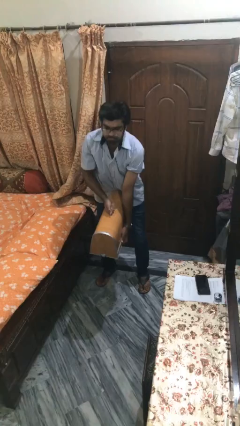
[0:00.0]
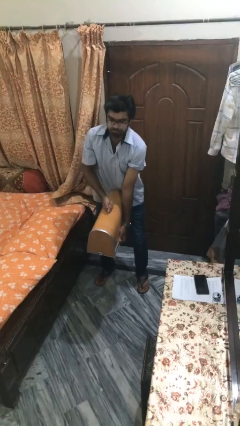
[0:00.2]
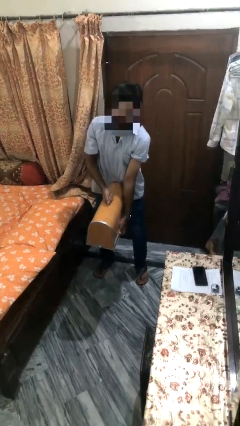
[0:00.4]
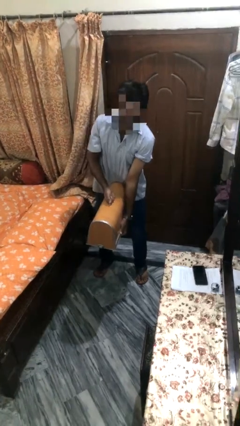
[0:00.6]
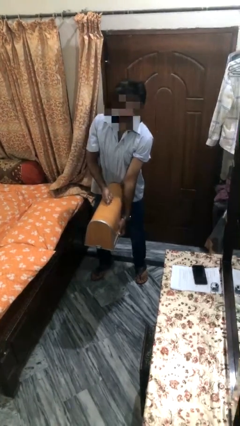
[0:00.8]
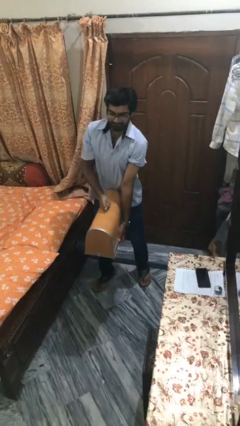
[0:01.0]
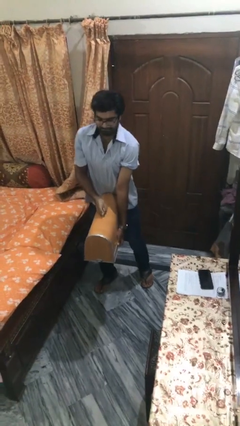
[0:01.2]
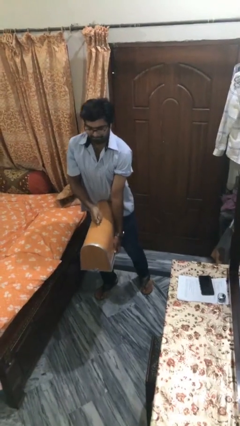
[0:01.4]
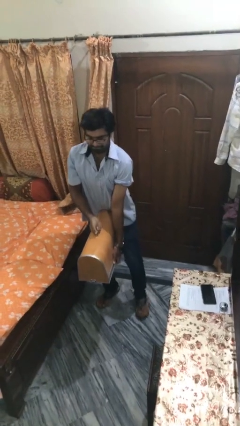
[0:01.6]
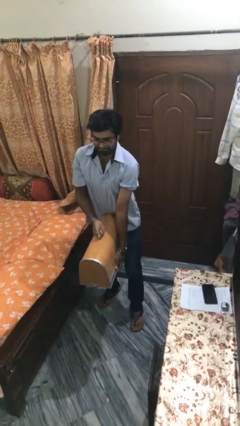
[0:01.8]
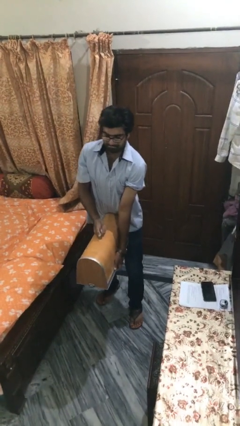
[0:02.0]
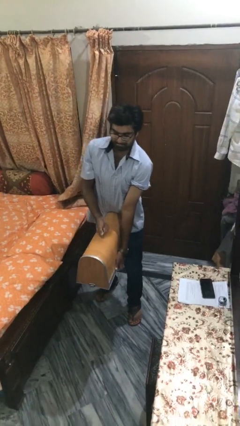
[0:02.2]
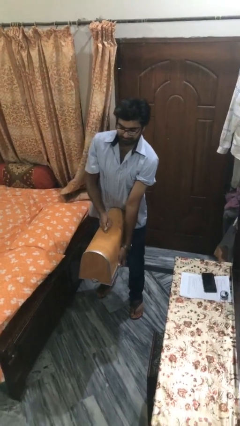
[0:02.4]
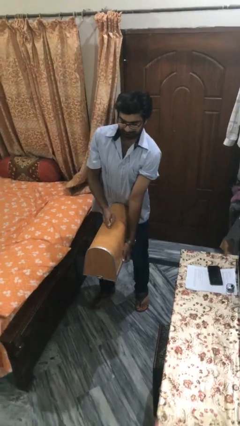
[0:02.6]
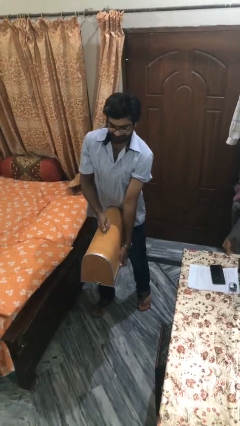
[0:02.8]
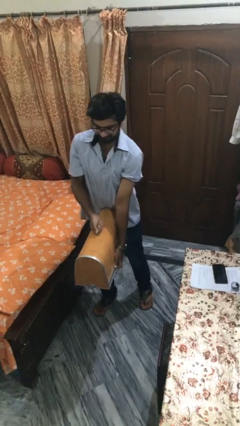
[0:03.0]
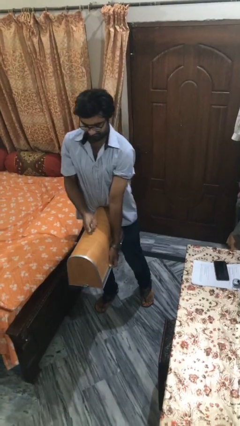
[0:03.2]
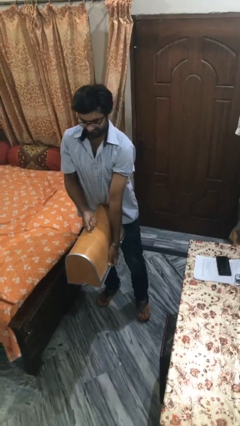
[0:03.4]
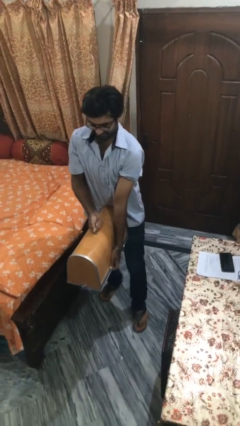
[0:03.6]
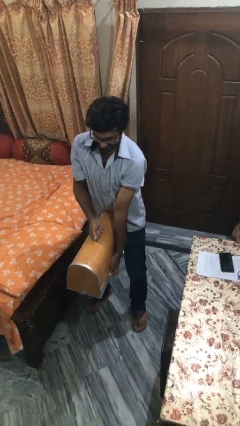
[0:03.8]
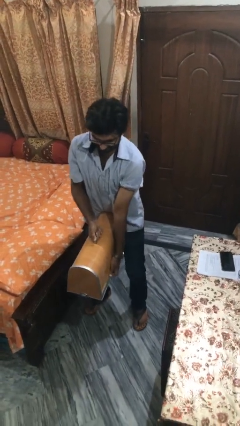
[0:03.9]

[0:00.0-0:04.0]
person carries heavy object

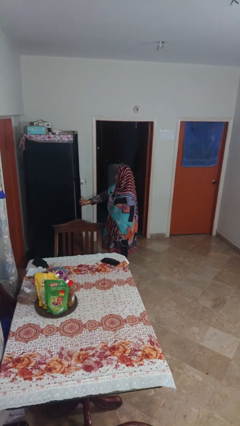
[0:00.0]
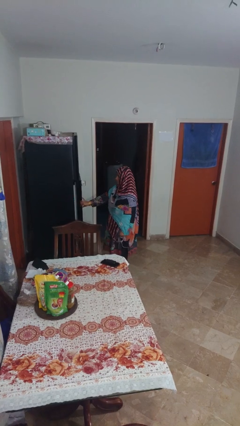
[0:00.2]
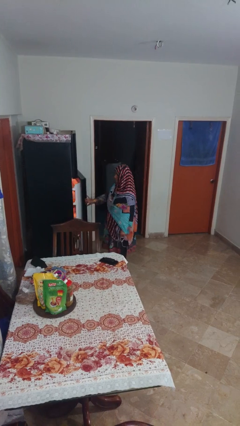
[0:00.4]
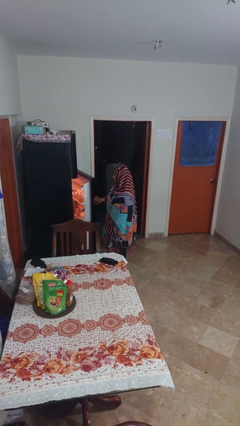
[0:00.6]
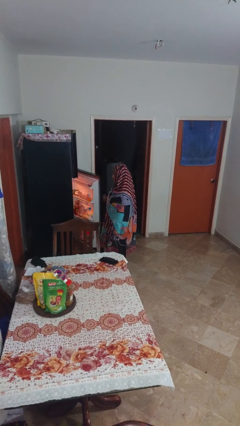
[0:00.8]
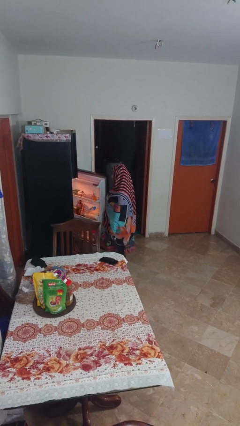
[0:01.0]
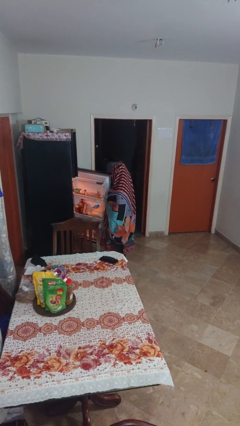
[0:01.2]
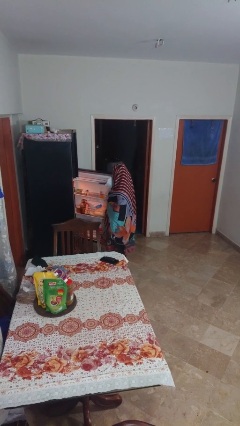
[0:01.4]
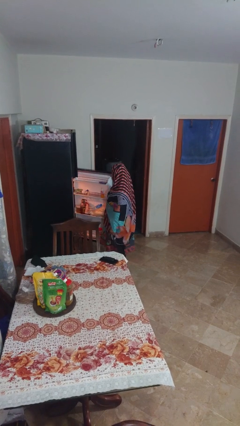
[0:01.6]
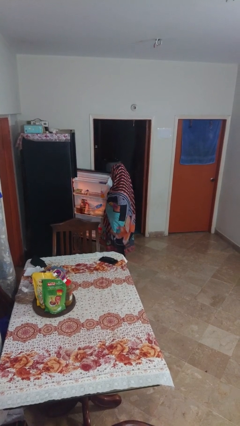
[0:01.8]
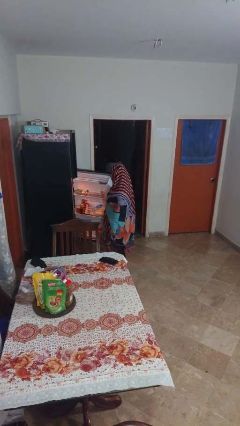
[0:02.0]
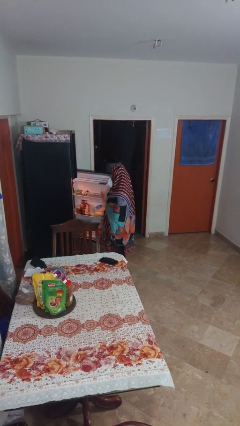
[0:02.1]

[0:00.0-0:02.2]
person opens refrigerator

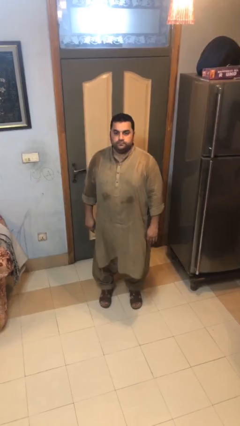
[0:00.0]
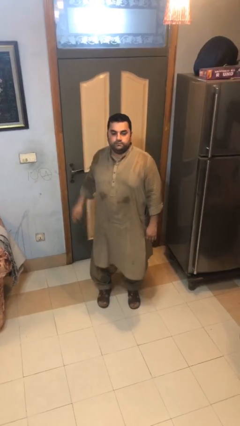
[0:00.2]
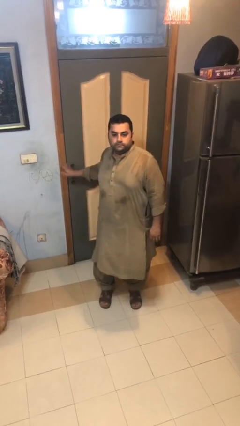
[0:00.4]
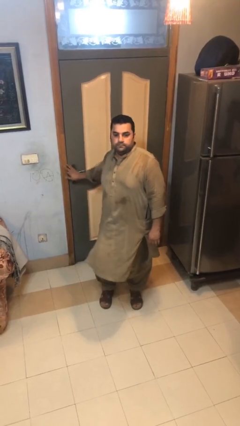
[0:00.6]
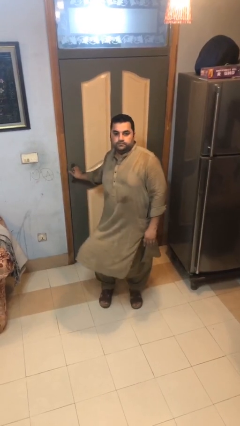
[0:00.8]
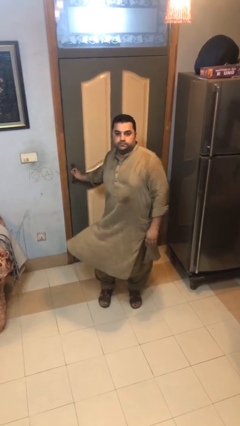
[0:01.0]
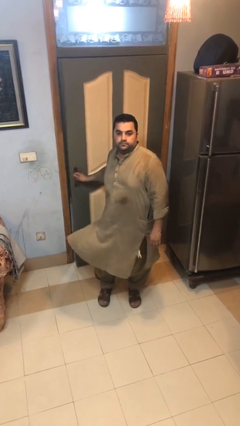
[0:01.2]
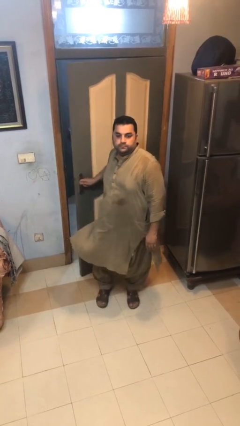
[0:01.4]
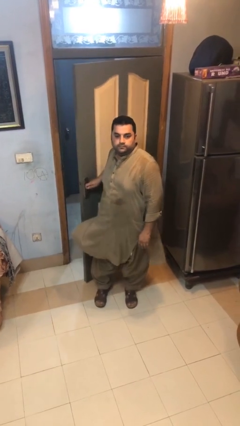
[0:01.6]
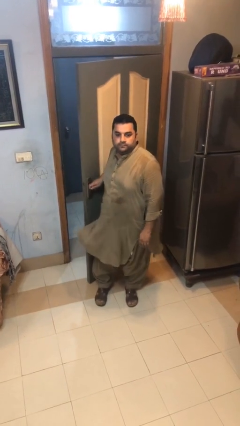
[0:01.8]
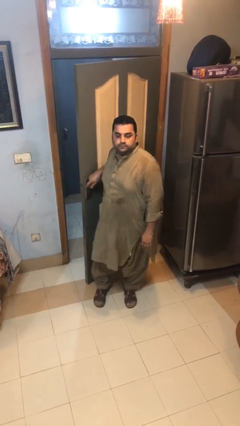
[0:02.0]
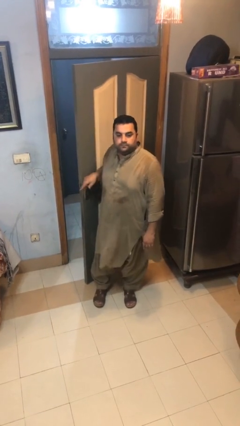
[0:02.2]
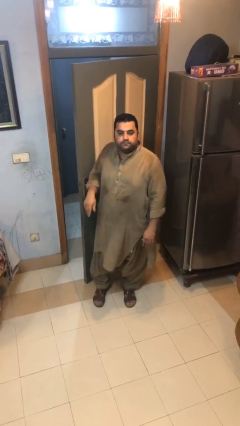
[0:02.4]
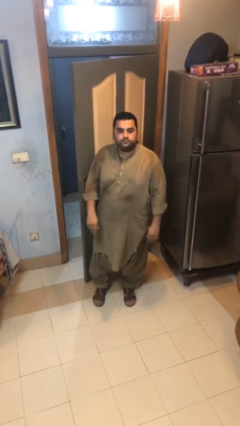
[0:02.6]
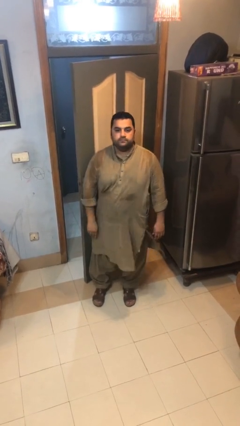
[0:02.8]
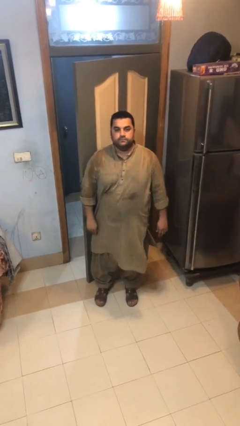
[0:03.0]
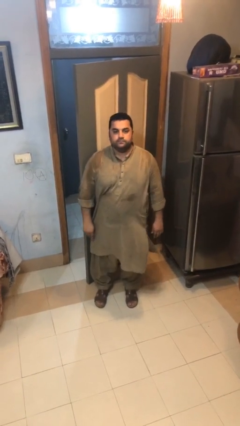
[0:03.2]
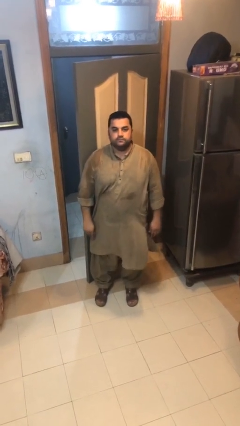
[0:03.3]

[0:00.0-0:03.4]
person opens facility door

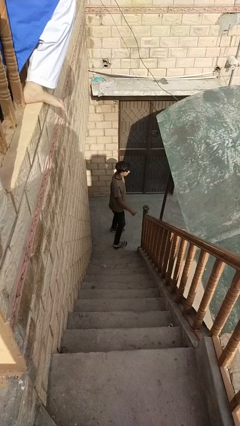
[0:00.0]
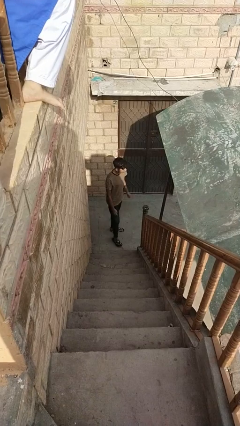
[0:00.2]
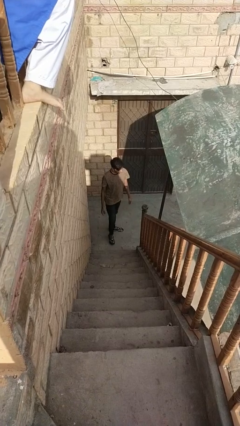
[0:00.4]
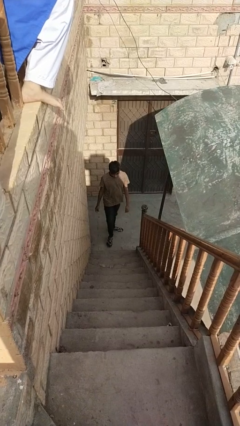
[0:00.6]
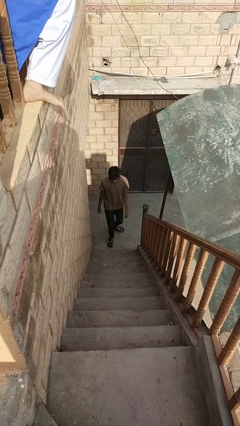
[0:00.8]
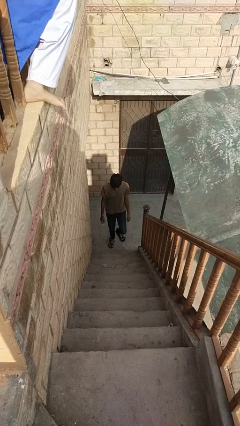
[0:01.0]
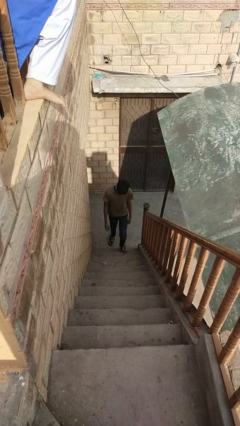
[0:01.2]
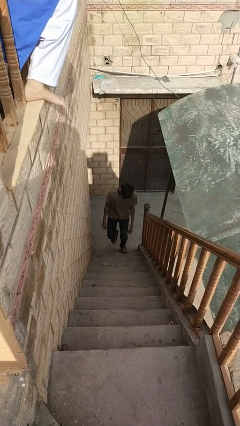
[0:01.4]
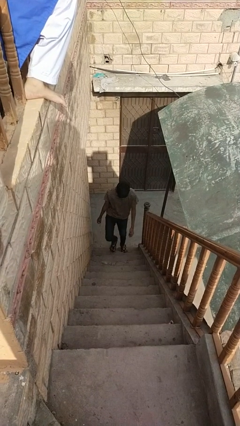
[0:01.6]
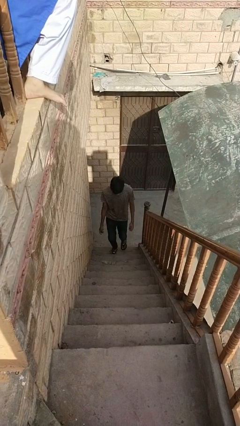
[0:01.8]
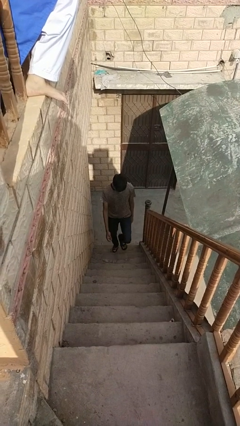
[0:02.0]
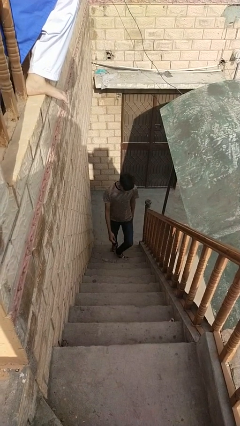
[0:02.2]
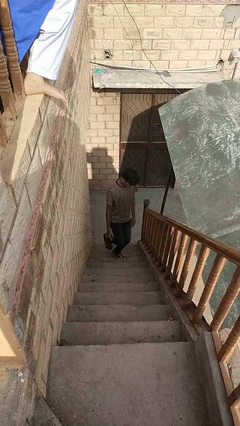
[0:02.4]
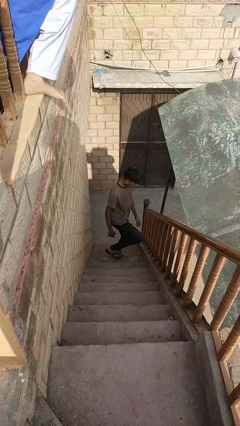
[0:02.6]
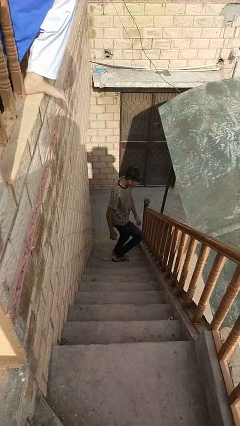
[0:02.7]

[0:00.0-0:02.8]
person climbs up stairs

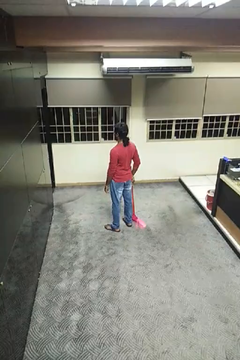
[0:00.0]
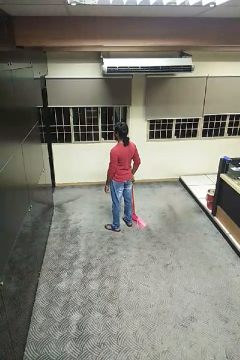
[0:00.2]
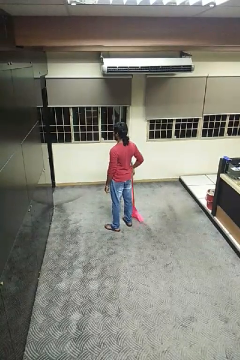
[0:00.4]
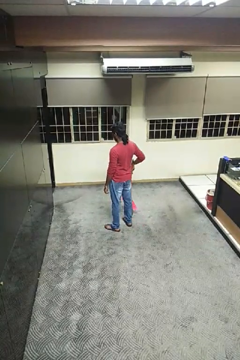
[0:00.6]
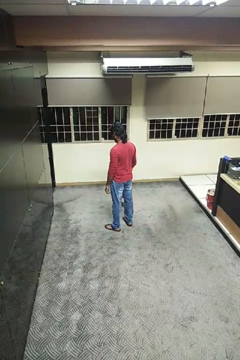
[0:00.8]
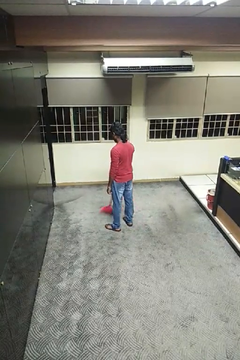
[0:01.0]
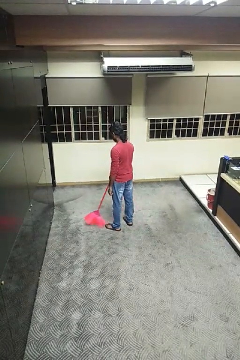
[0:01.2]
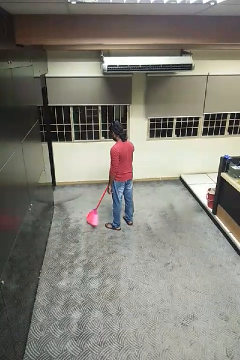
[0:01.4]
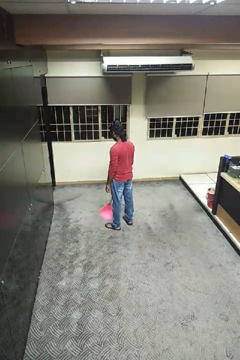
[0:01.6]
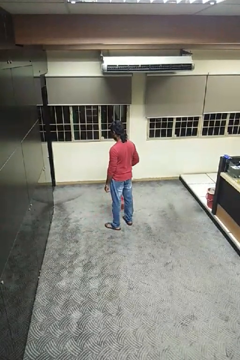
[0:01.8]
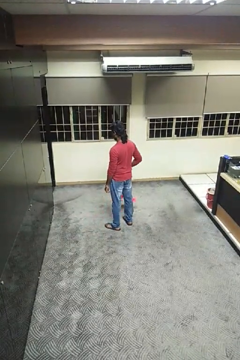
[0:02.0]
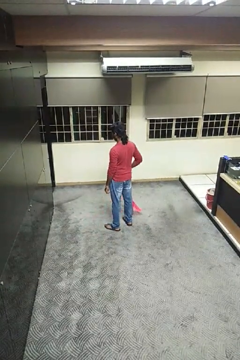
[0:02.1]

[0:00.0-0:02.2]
person sweeps floor

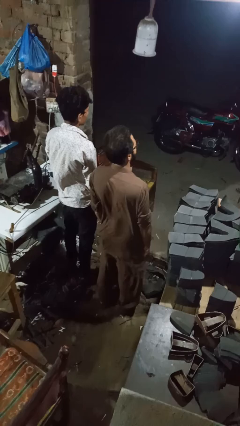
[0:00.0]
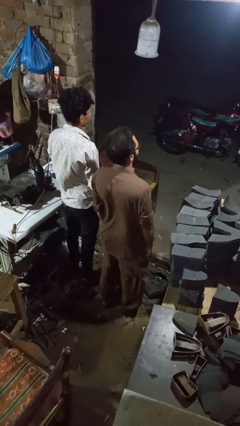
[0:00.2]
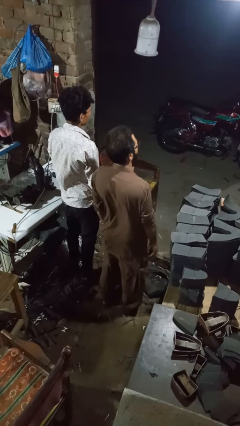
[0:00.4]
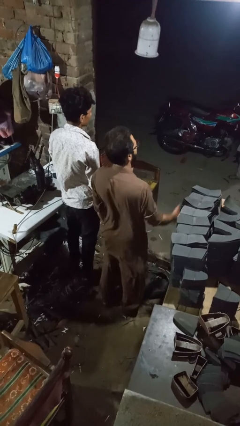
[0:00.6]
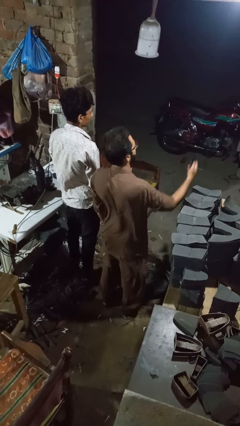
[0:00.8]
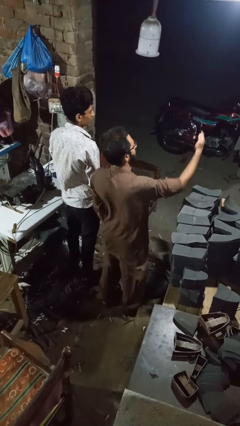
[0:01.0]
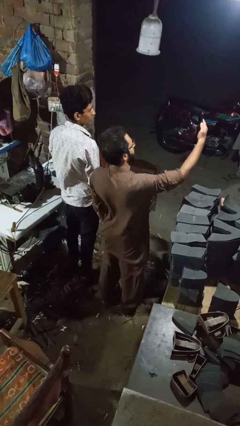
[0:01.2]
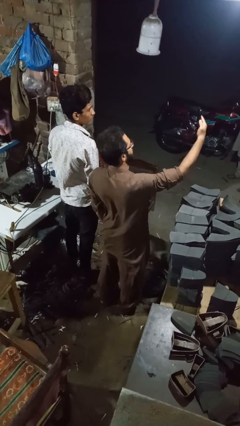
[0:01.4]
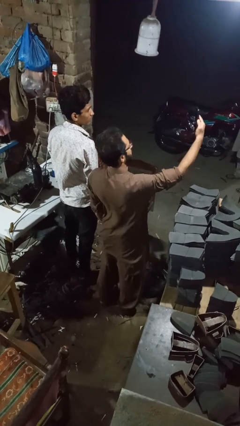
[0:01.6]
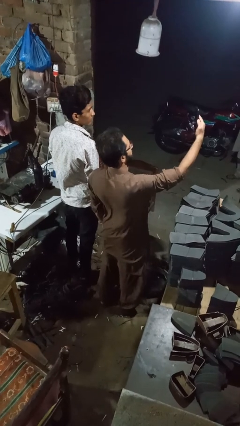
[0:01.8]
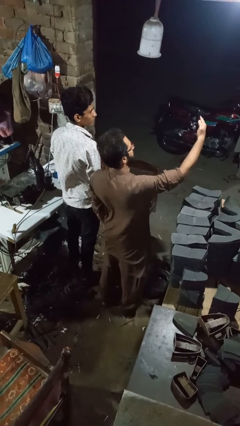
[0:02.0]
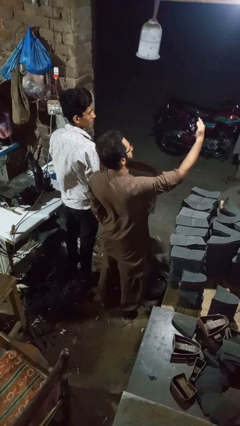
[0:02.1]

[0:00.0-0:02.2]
person takes selfie with person

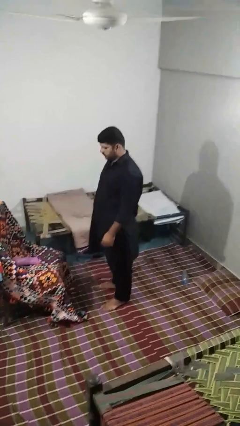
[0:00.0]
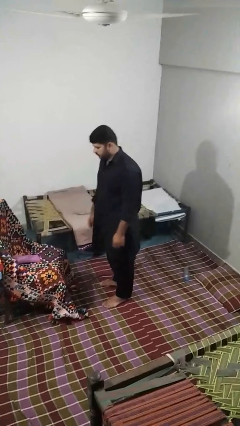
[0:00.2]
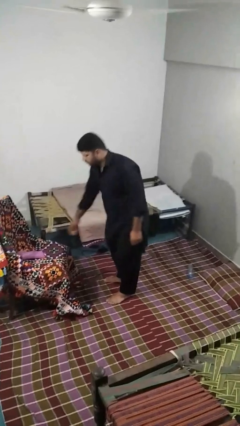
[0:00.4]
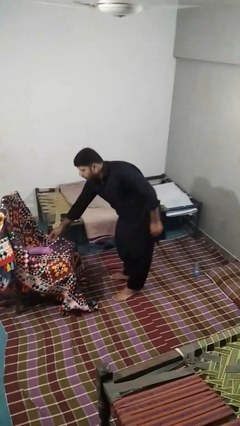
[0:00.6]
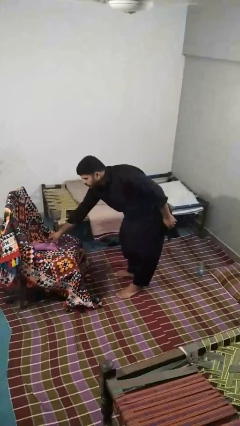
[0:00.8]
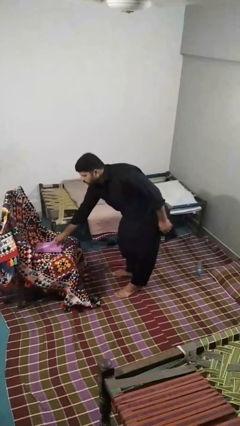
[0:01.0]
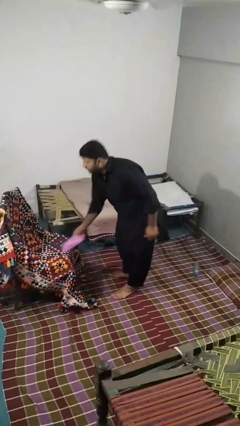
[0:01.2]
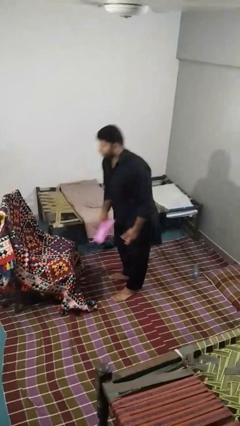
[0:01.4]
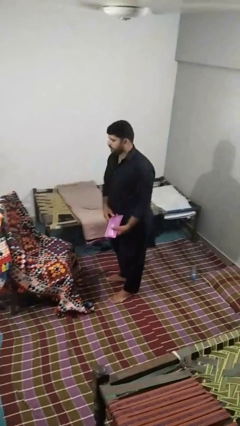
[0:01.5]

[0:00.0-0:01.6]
person picks up object from couch
